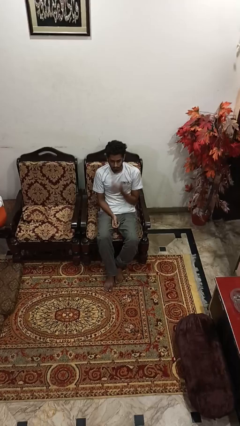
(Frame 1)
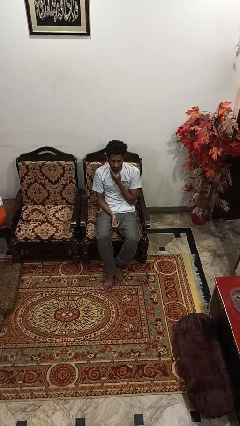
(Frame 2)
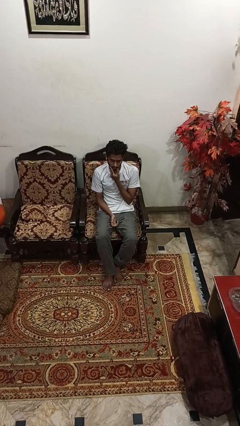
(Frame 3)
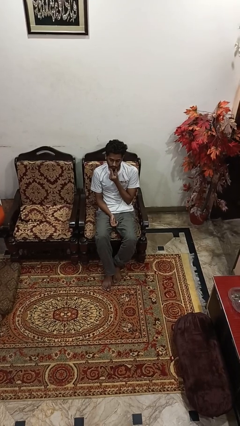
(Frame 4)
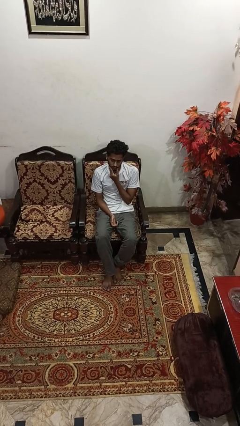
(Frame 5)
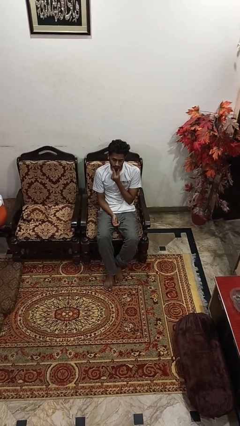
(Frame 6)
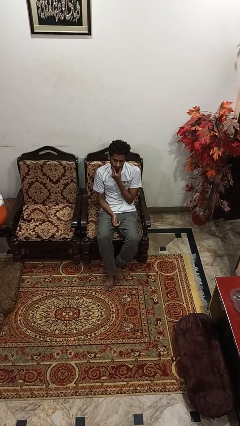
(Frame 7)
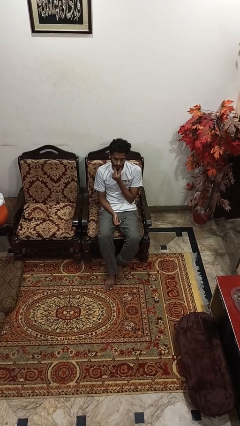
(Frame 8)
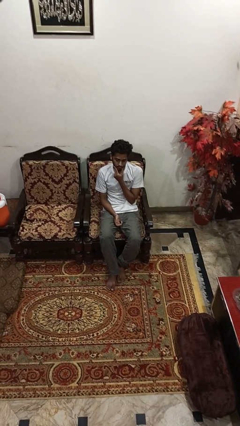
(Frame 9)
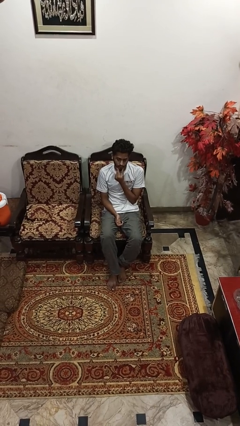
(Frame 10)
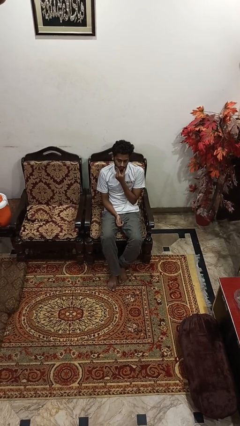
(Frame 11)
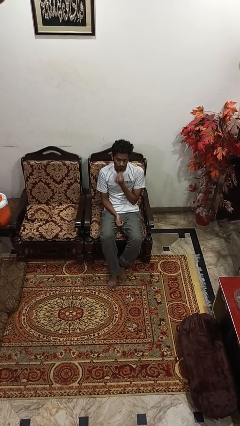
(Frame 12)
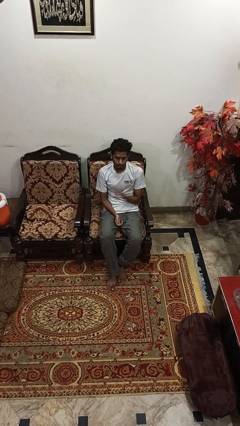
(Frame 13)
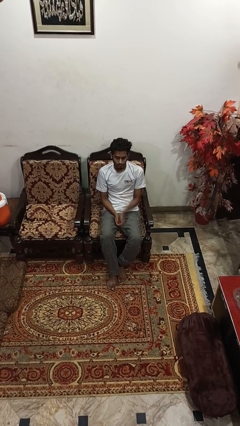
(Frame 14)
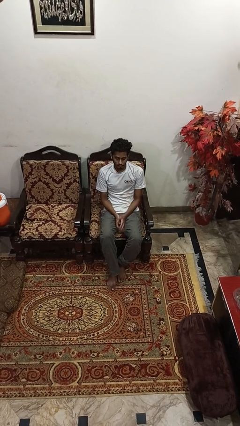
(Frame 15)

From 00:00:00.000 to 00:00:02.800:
person strokes chin

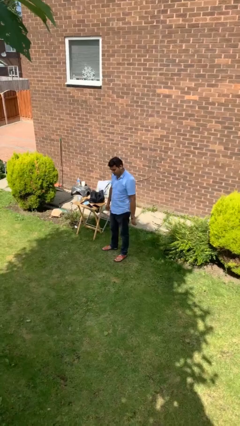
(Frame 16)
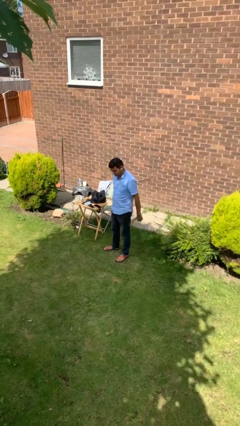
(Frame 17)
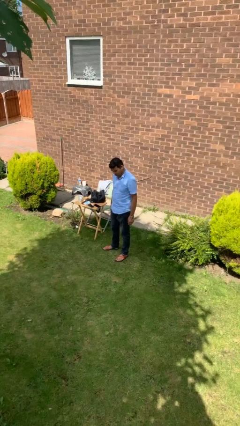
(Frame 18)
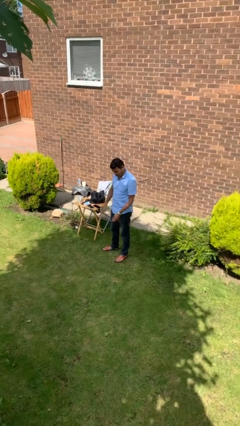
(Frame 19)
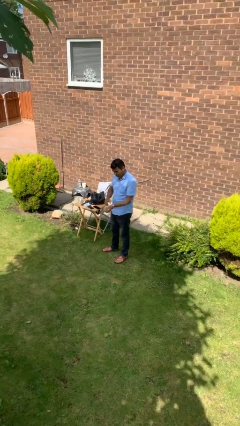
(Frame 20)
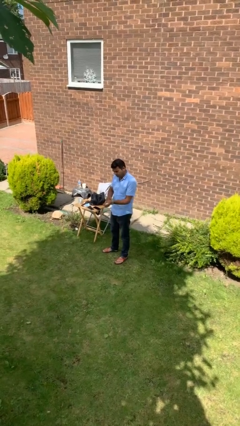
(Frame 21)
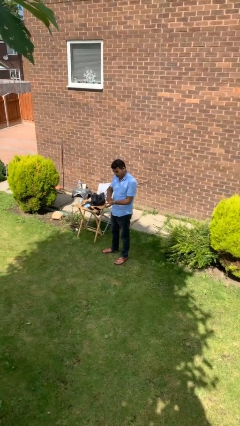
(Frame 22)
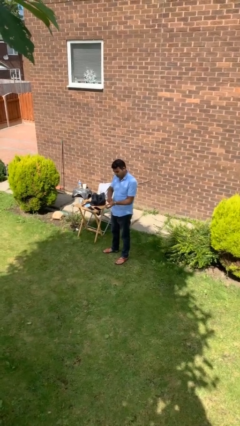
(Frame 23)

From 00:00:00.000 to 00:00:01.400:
person takes off wristwatch

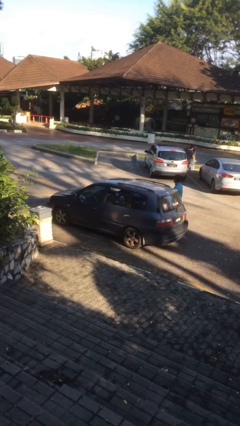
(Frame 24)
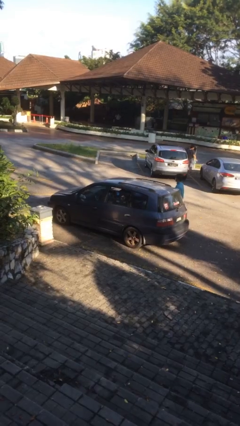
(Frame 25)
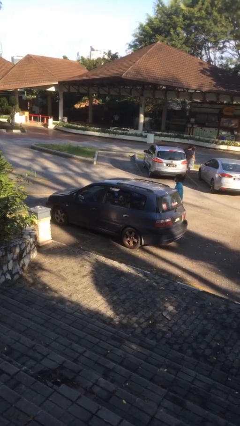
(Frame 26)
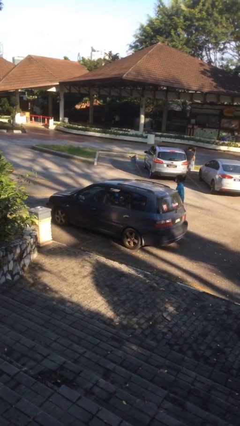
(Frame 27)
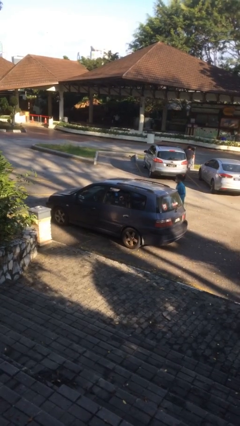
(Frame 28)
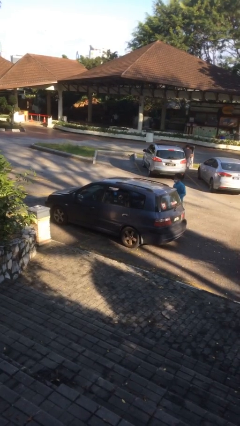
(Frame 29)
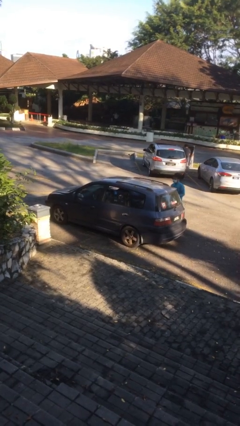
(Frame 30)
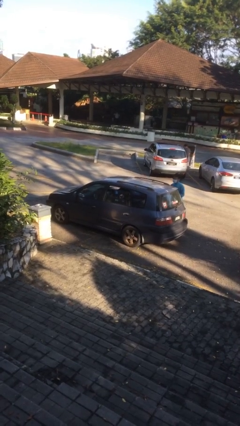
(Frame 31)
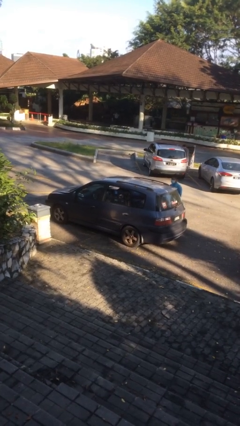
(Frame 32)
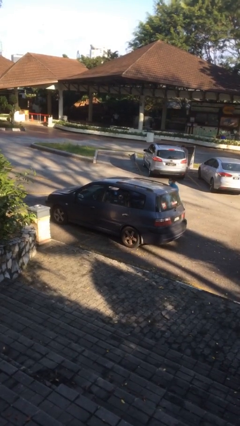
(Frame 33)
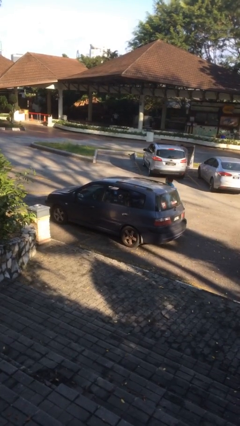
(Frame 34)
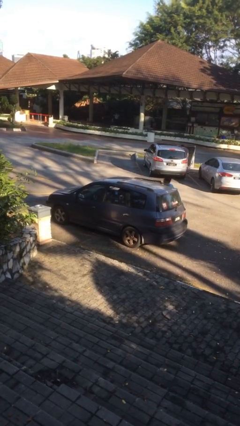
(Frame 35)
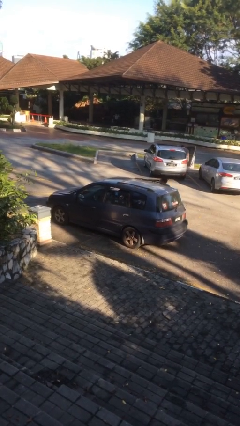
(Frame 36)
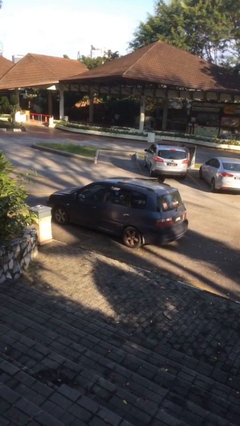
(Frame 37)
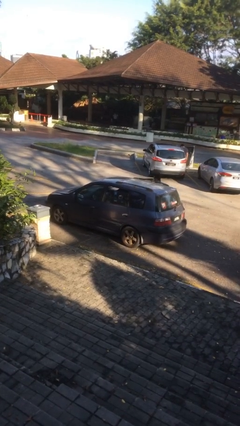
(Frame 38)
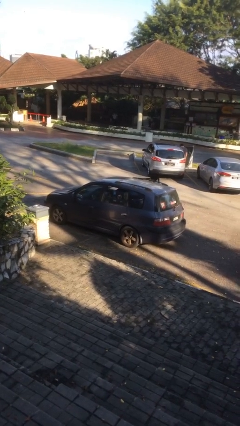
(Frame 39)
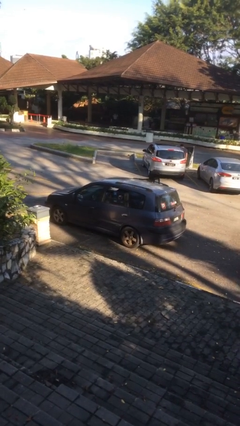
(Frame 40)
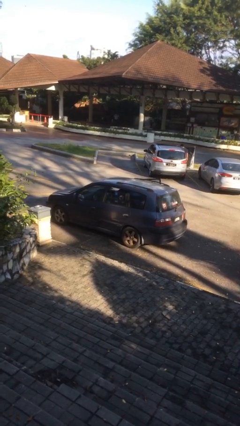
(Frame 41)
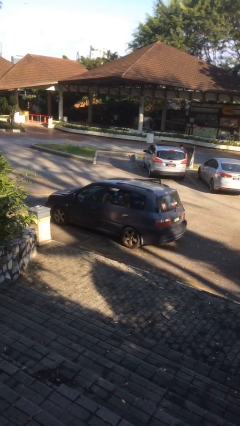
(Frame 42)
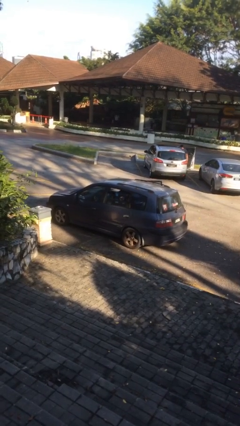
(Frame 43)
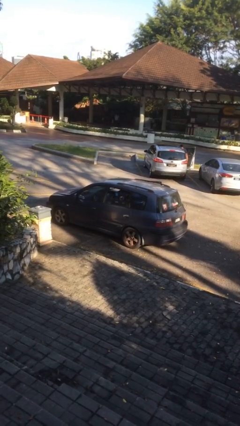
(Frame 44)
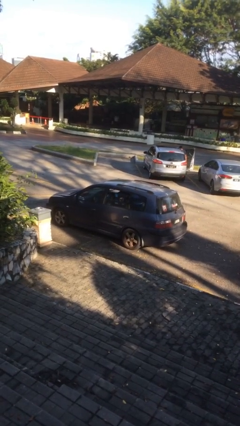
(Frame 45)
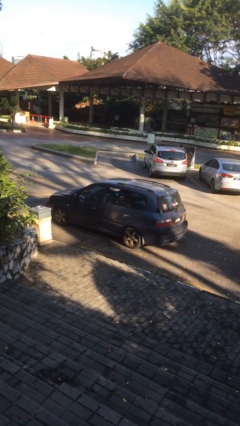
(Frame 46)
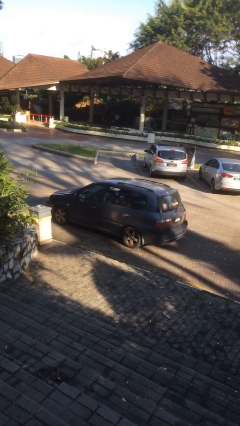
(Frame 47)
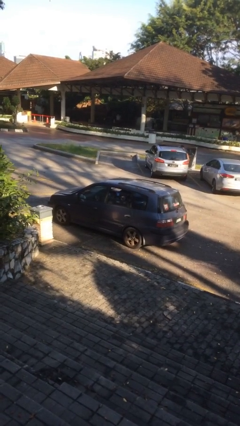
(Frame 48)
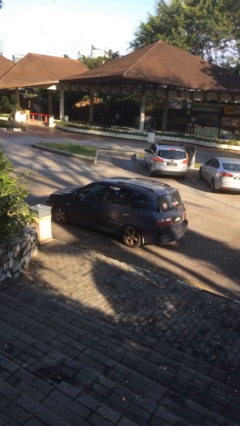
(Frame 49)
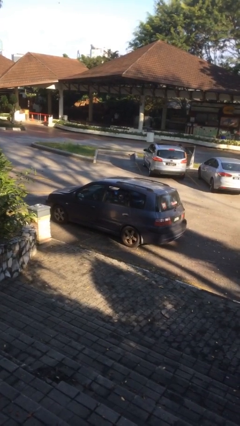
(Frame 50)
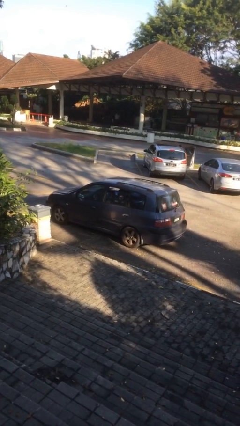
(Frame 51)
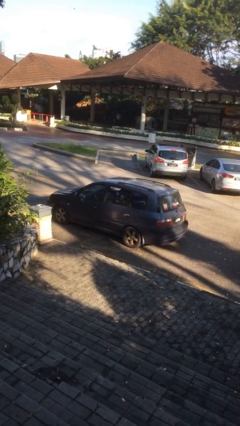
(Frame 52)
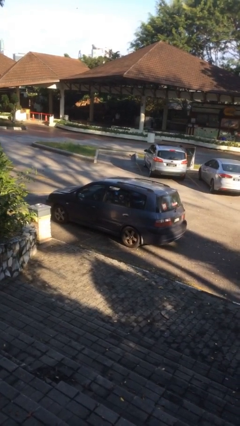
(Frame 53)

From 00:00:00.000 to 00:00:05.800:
car picks up person

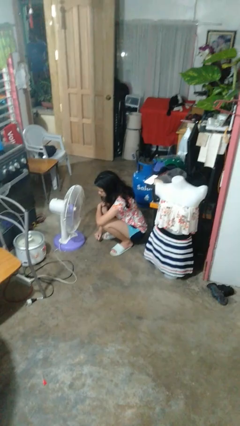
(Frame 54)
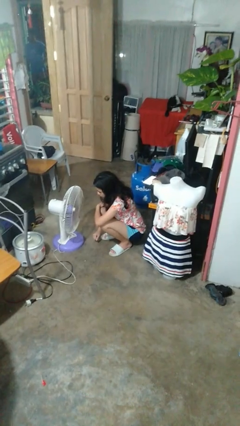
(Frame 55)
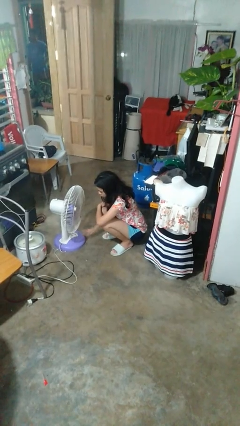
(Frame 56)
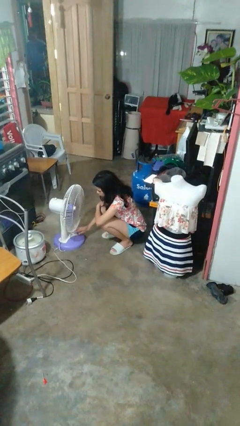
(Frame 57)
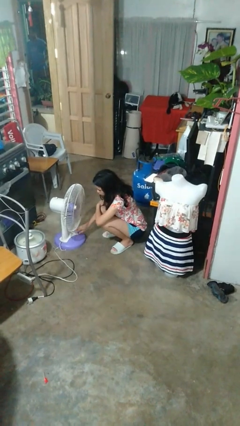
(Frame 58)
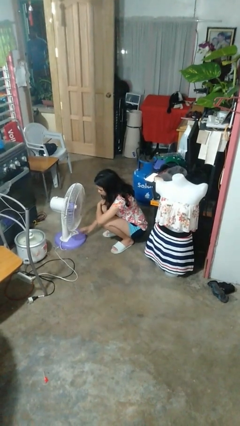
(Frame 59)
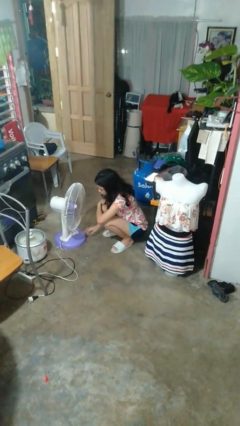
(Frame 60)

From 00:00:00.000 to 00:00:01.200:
person turns off fan

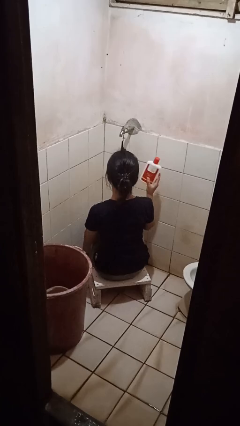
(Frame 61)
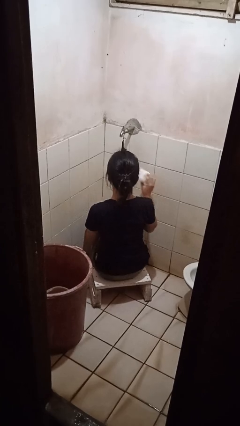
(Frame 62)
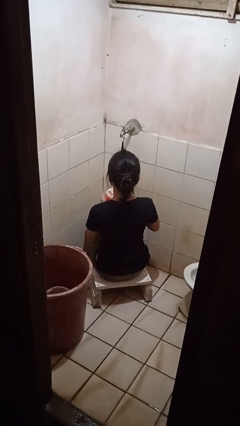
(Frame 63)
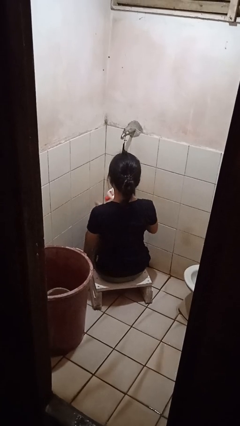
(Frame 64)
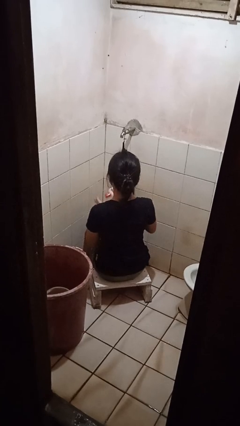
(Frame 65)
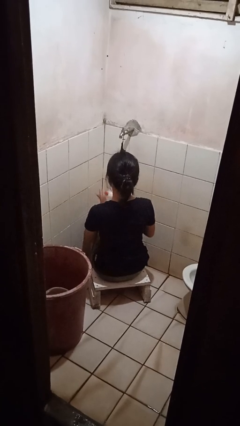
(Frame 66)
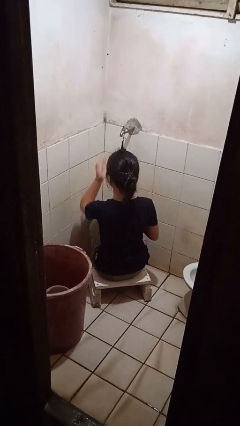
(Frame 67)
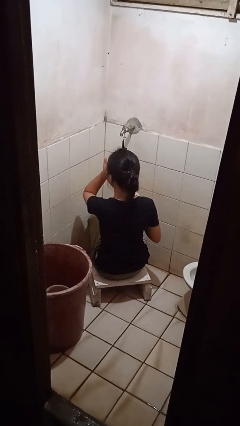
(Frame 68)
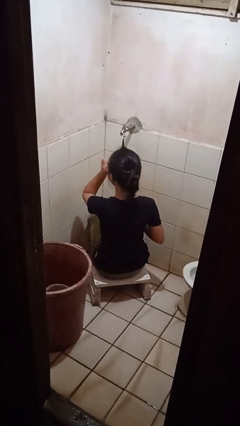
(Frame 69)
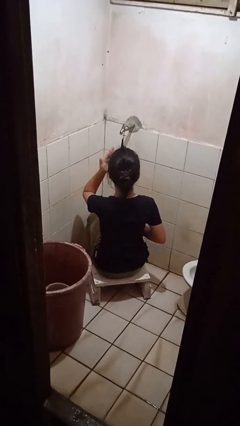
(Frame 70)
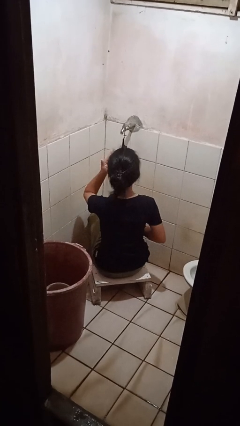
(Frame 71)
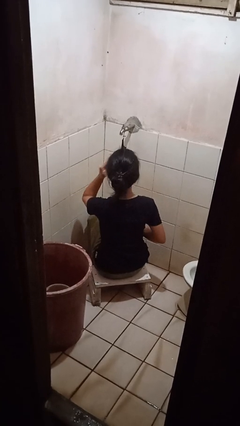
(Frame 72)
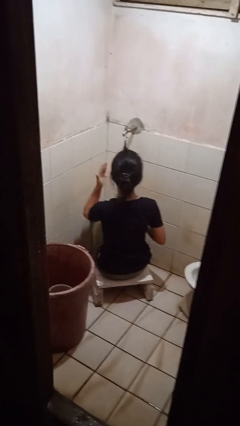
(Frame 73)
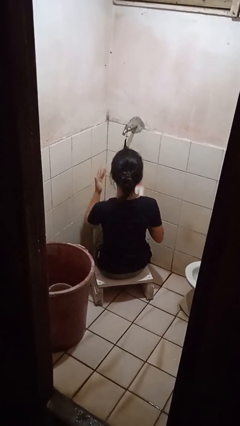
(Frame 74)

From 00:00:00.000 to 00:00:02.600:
person applies facial moisturizer

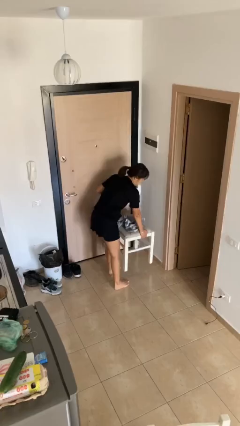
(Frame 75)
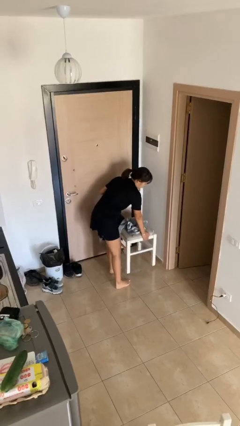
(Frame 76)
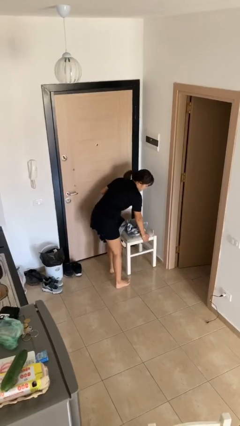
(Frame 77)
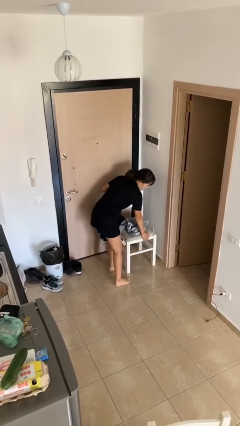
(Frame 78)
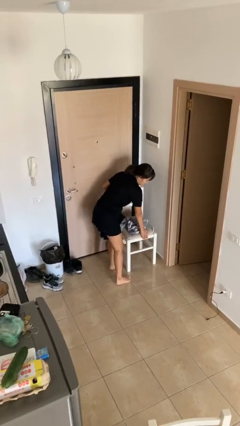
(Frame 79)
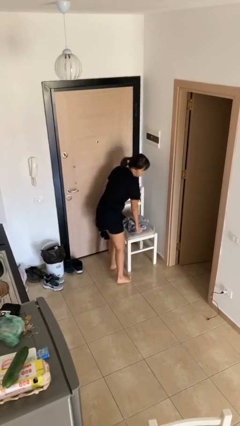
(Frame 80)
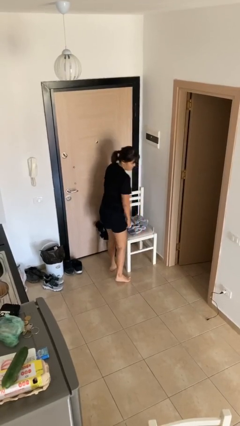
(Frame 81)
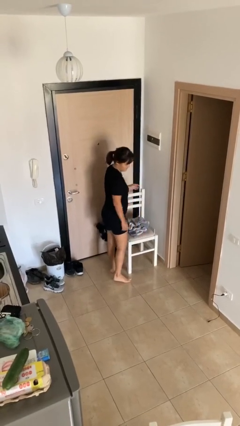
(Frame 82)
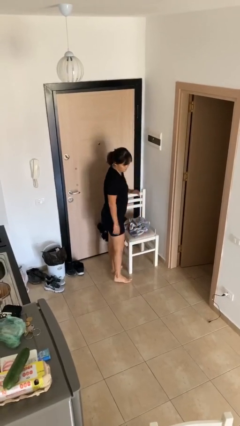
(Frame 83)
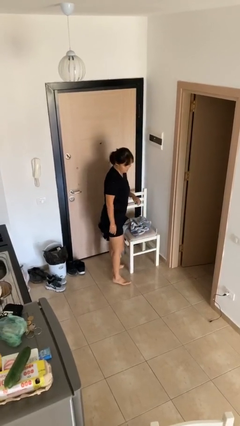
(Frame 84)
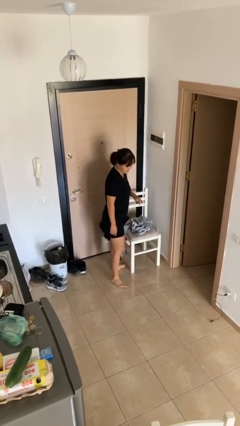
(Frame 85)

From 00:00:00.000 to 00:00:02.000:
person puts down object on floor

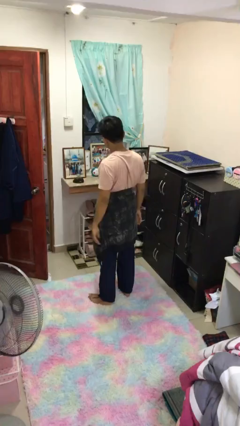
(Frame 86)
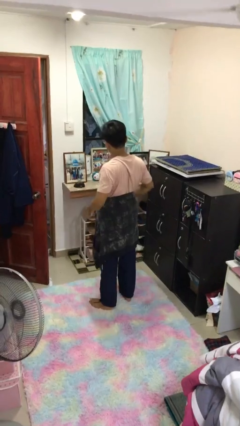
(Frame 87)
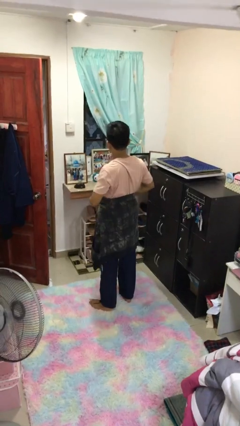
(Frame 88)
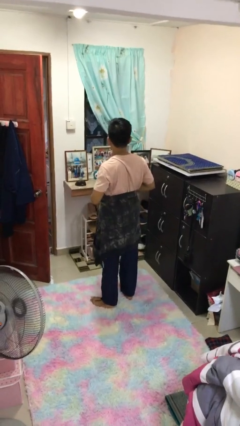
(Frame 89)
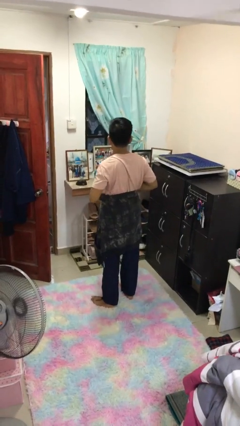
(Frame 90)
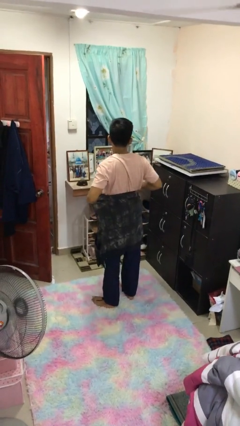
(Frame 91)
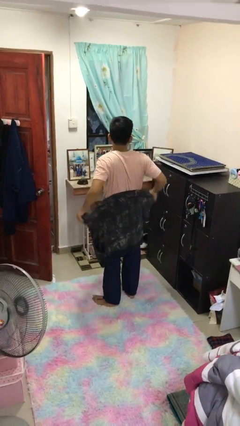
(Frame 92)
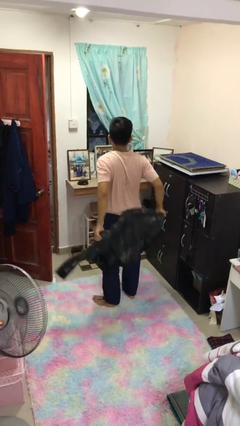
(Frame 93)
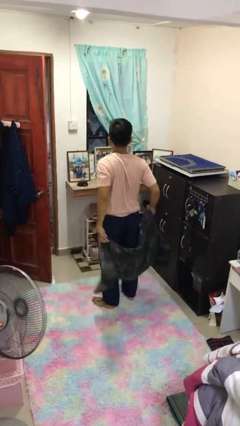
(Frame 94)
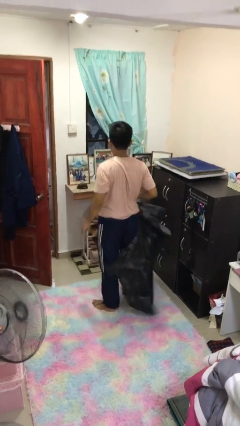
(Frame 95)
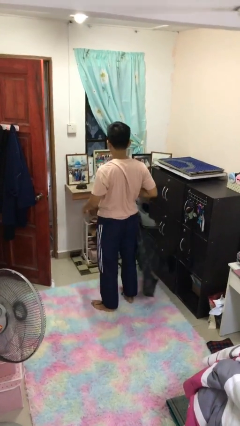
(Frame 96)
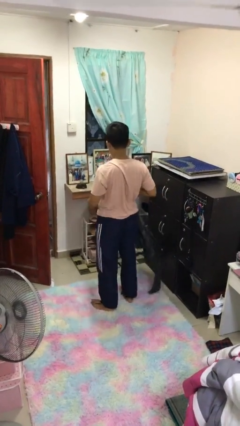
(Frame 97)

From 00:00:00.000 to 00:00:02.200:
person unties jacket around waist
